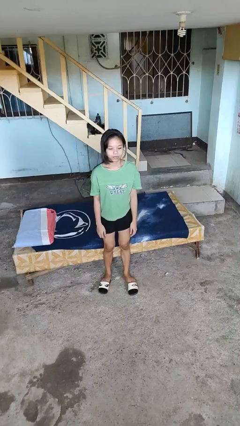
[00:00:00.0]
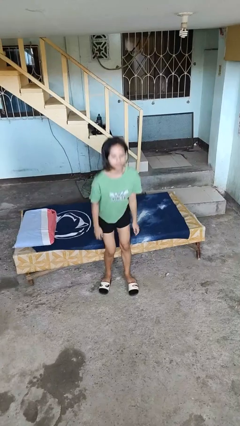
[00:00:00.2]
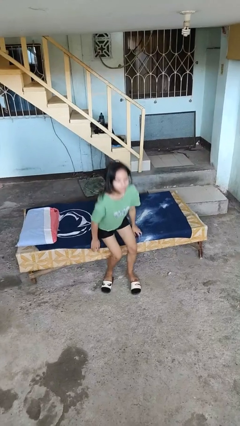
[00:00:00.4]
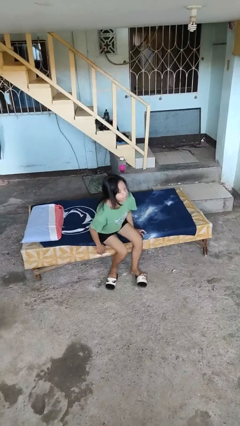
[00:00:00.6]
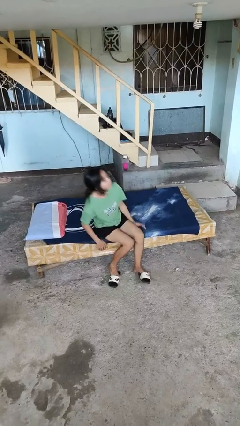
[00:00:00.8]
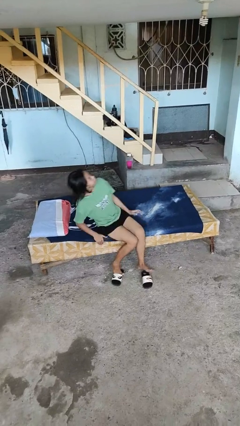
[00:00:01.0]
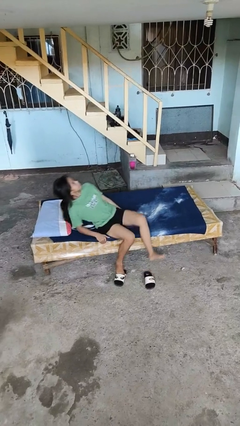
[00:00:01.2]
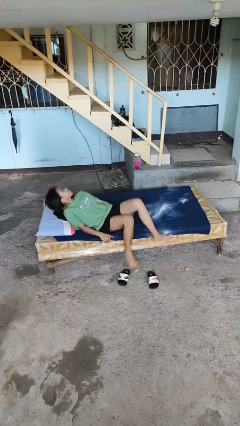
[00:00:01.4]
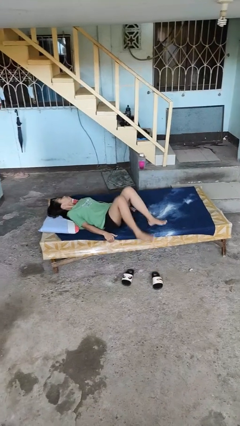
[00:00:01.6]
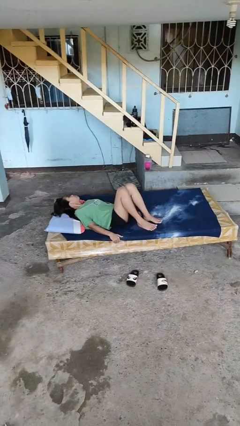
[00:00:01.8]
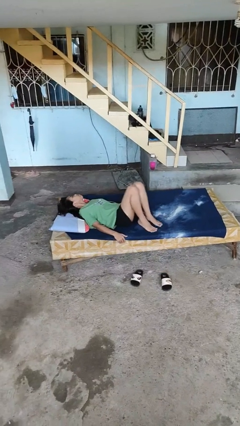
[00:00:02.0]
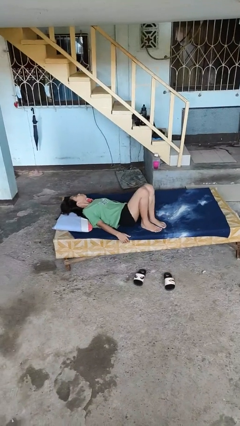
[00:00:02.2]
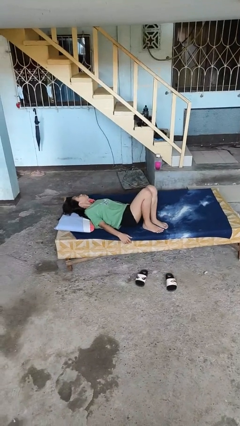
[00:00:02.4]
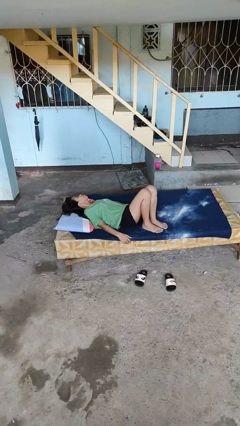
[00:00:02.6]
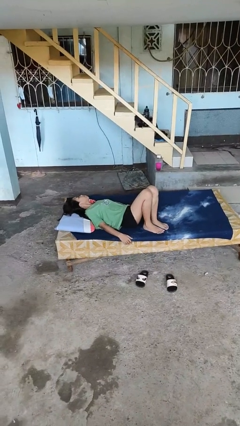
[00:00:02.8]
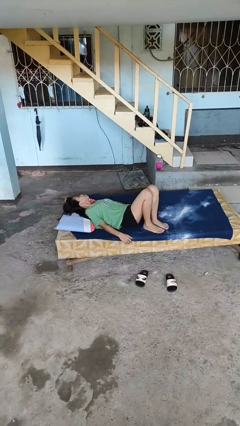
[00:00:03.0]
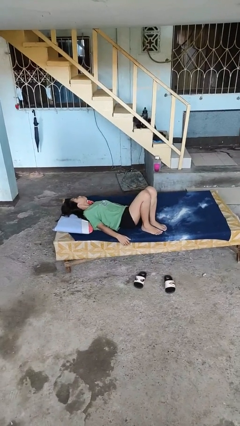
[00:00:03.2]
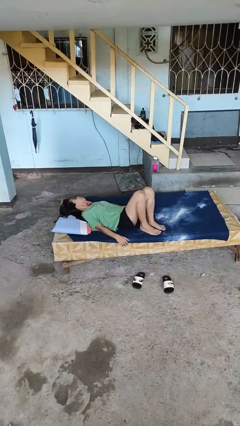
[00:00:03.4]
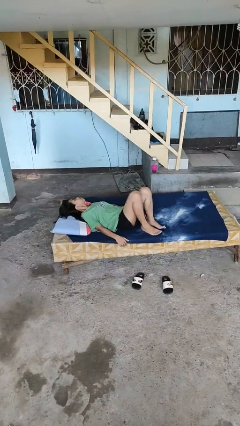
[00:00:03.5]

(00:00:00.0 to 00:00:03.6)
person lies down on bed

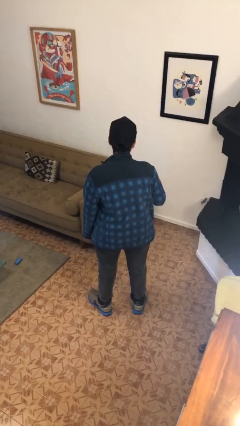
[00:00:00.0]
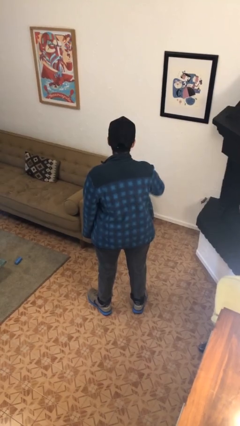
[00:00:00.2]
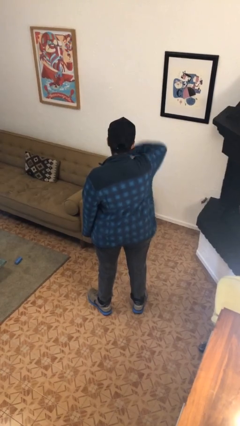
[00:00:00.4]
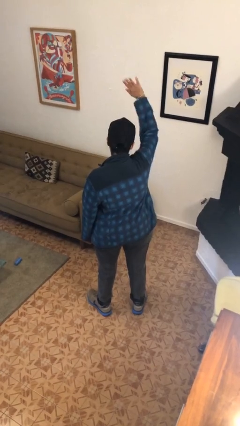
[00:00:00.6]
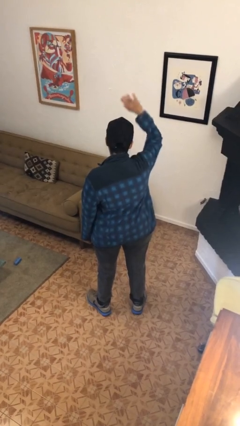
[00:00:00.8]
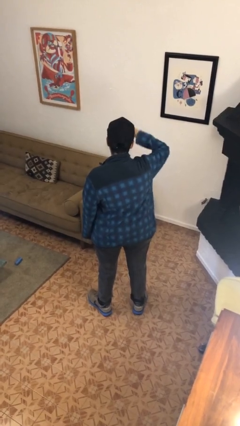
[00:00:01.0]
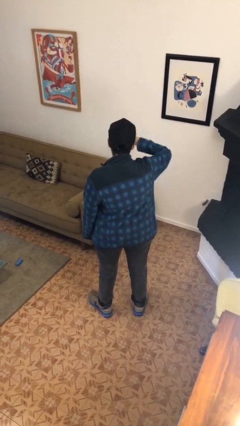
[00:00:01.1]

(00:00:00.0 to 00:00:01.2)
person gestures swipe up

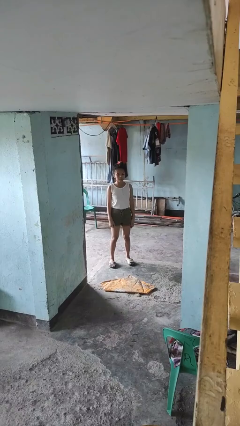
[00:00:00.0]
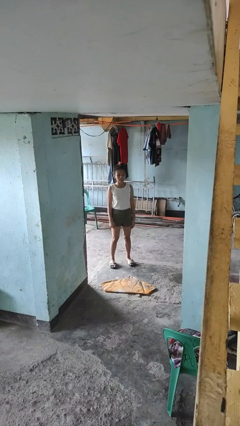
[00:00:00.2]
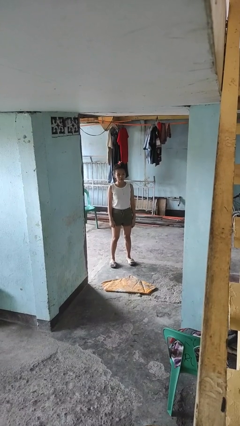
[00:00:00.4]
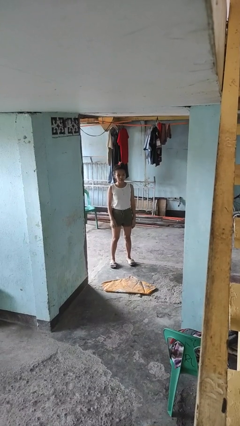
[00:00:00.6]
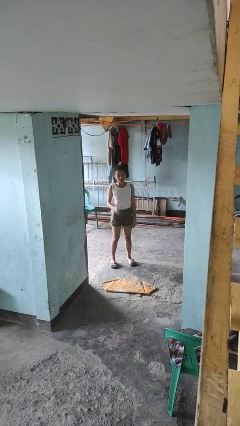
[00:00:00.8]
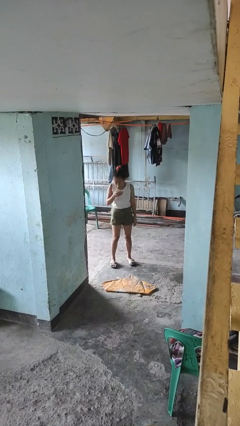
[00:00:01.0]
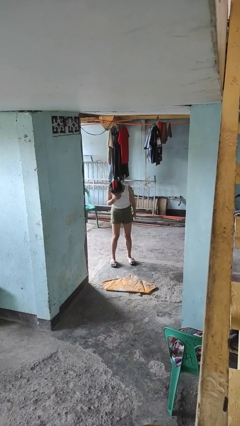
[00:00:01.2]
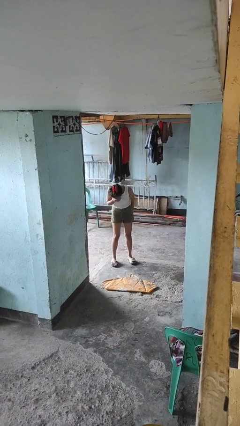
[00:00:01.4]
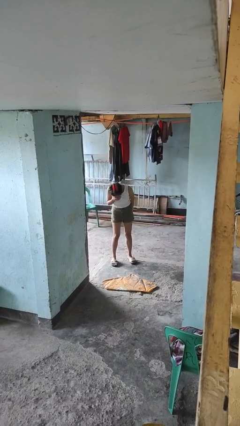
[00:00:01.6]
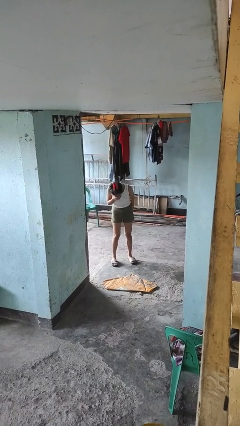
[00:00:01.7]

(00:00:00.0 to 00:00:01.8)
person sneezes into hand

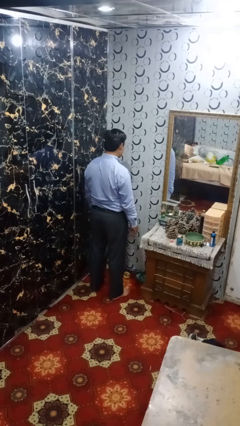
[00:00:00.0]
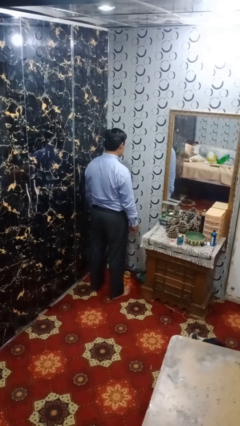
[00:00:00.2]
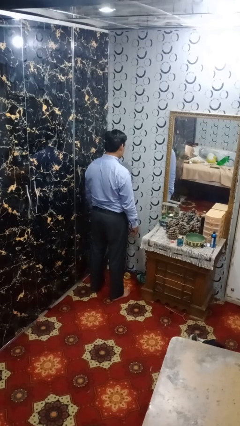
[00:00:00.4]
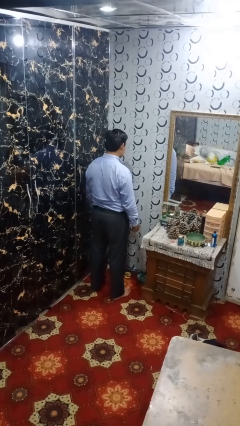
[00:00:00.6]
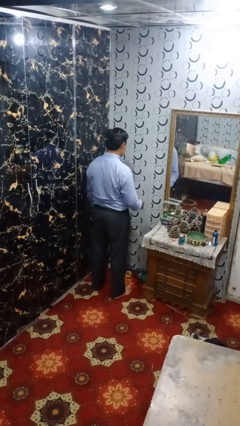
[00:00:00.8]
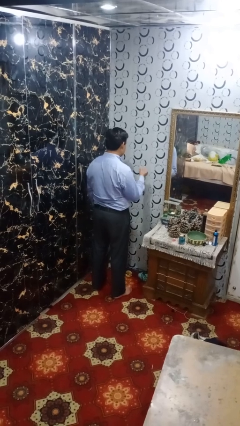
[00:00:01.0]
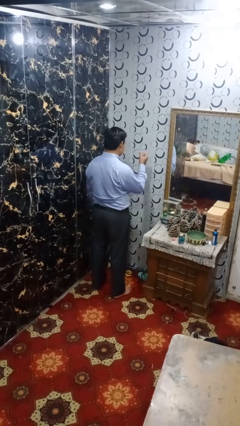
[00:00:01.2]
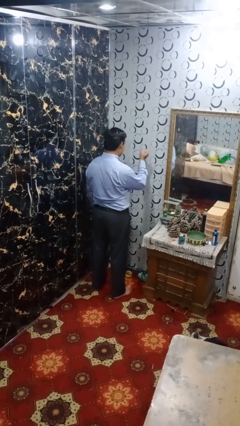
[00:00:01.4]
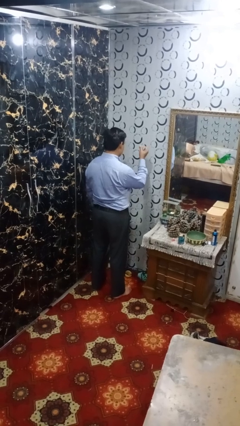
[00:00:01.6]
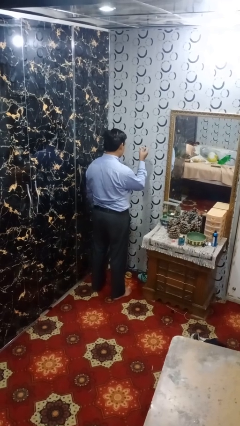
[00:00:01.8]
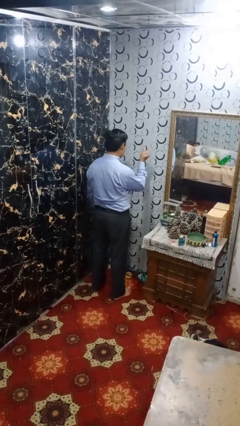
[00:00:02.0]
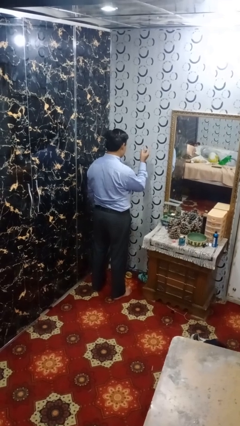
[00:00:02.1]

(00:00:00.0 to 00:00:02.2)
person snaps fingers

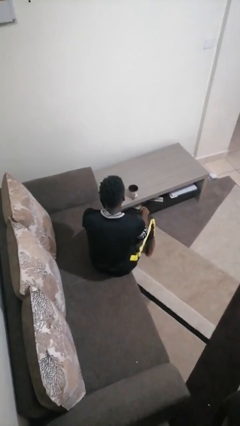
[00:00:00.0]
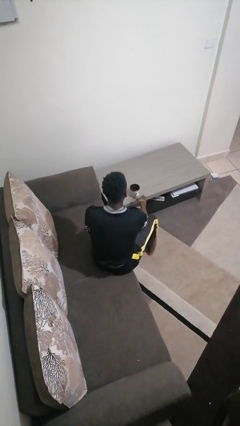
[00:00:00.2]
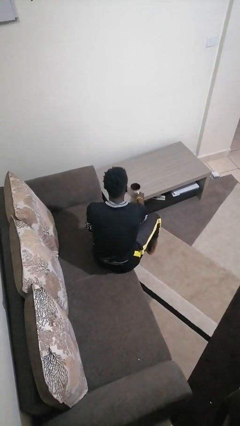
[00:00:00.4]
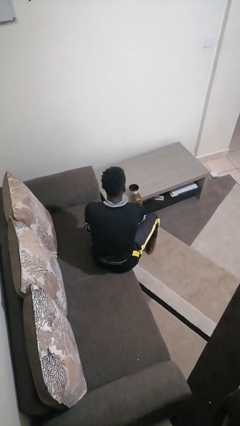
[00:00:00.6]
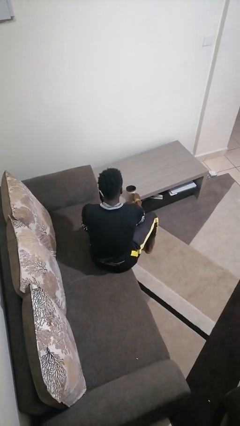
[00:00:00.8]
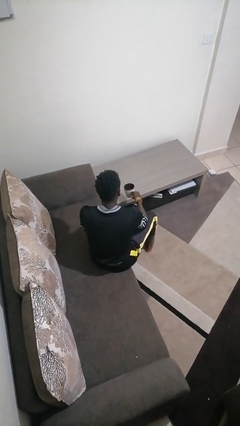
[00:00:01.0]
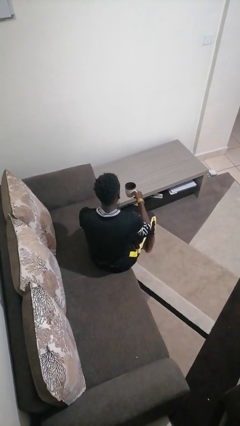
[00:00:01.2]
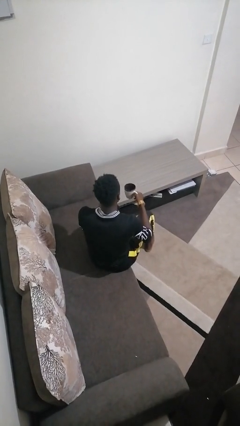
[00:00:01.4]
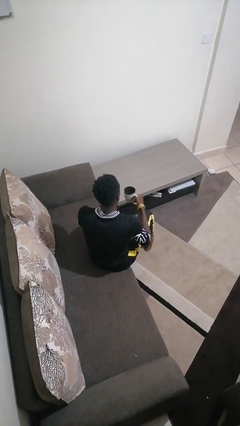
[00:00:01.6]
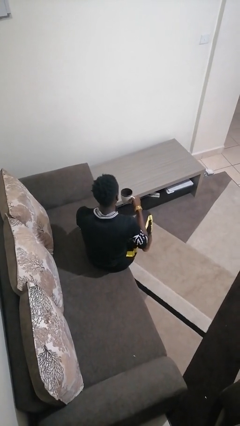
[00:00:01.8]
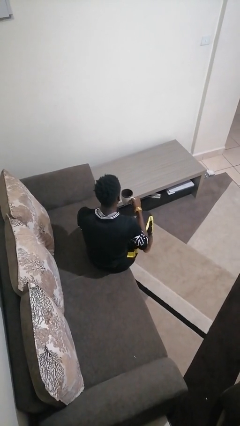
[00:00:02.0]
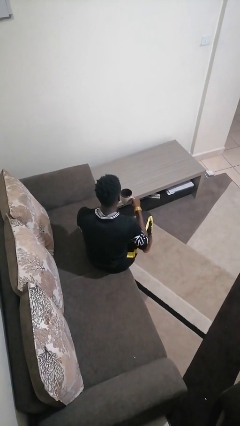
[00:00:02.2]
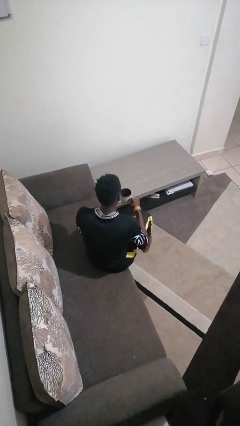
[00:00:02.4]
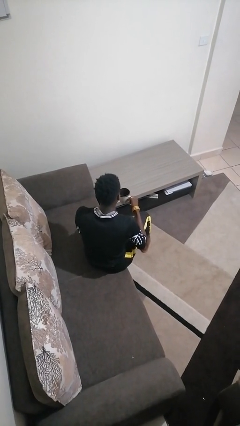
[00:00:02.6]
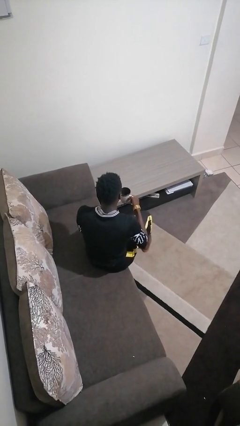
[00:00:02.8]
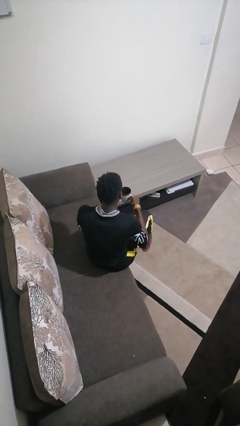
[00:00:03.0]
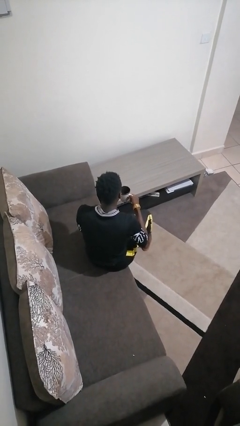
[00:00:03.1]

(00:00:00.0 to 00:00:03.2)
person picks up object from table

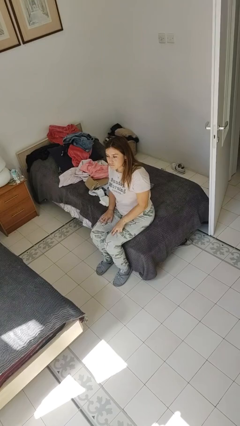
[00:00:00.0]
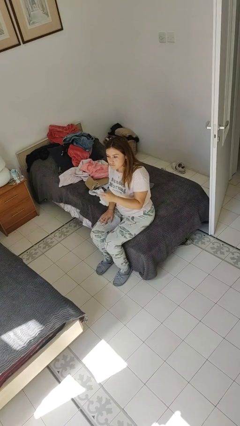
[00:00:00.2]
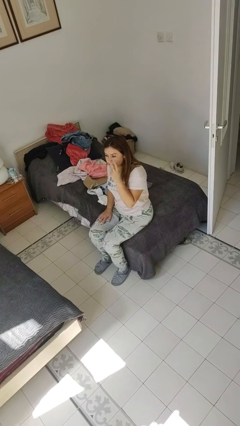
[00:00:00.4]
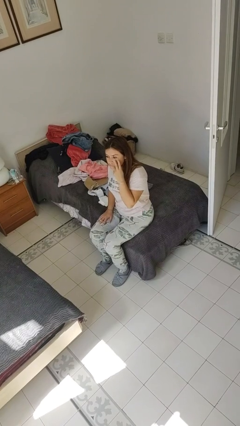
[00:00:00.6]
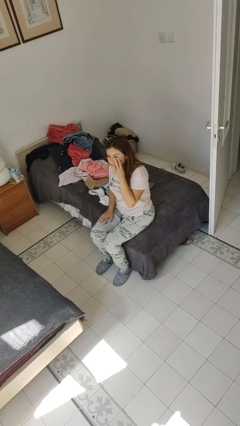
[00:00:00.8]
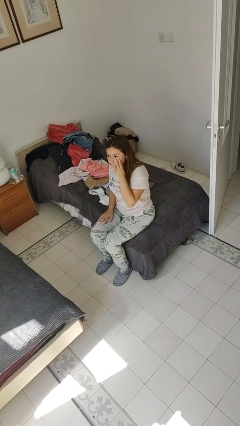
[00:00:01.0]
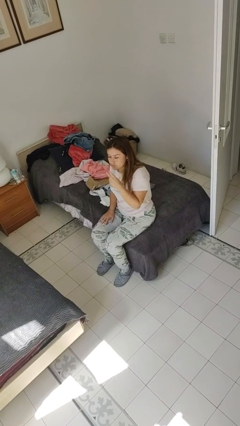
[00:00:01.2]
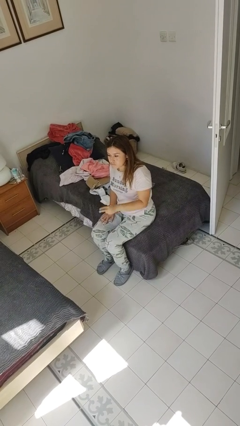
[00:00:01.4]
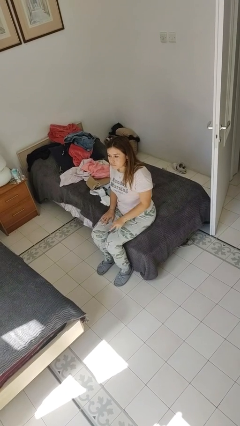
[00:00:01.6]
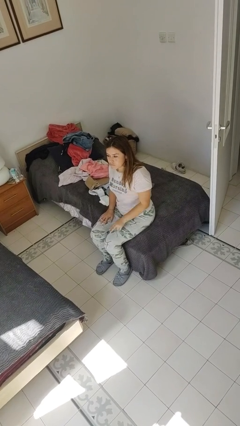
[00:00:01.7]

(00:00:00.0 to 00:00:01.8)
person gestures watch closely

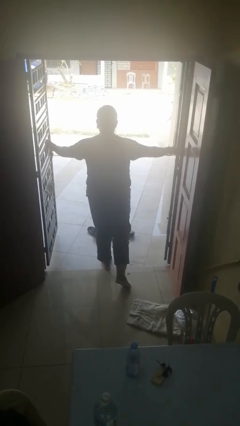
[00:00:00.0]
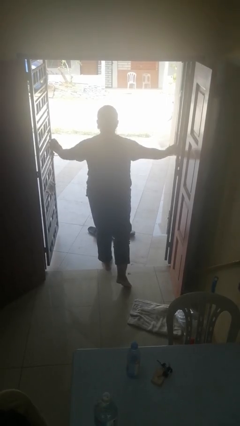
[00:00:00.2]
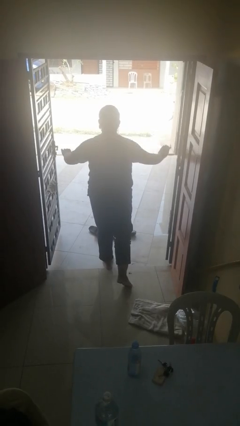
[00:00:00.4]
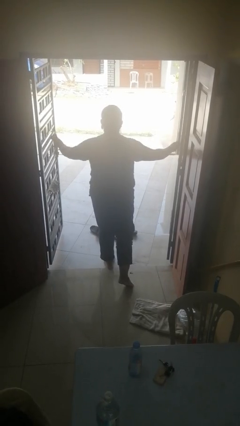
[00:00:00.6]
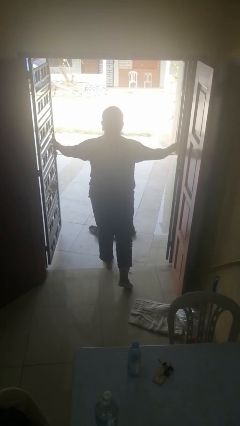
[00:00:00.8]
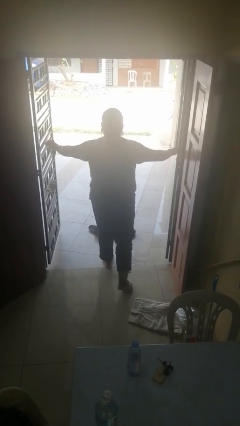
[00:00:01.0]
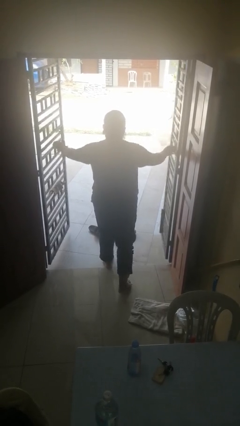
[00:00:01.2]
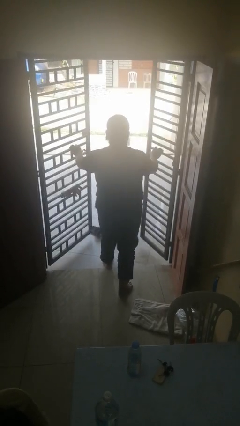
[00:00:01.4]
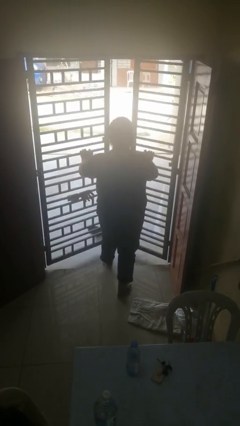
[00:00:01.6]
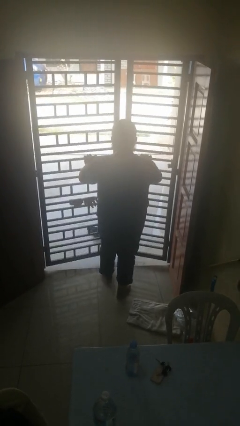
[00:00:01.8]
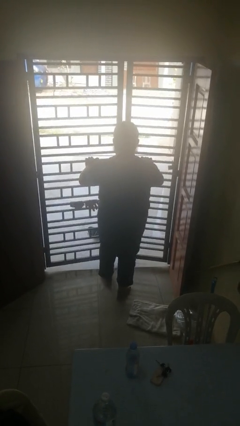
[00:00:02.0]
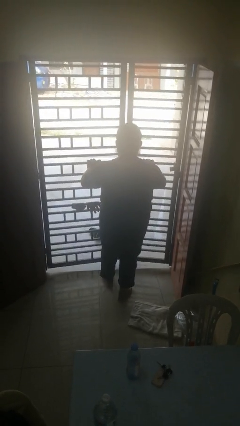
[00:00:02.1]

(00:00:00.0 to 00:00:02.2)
person closes gate

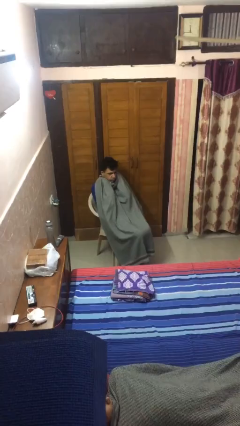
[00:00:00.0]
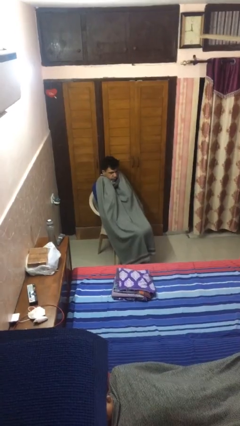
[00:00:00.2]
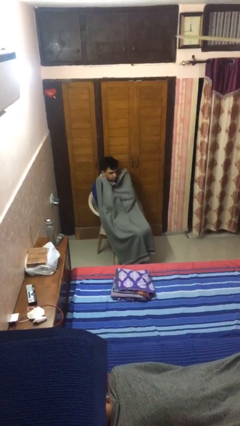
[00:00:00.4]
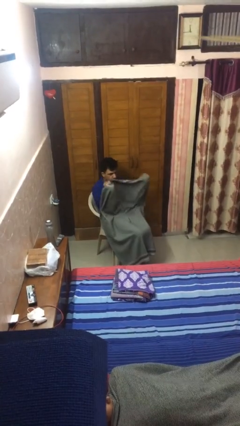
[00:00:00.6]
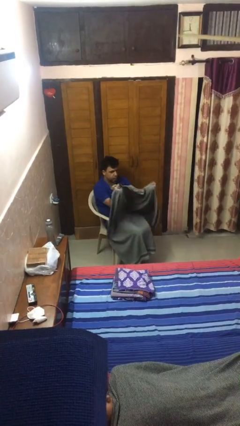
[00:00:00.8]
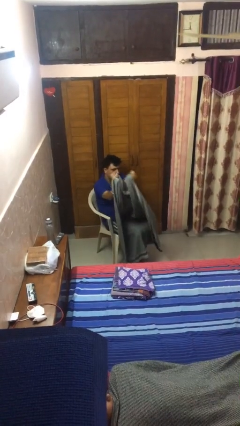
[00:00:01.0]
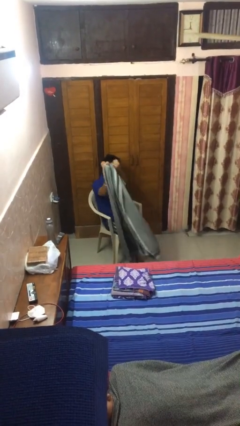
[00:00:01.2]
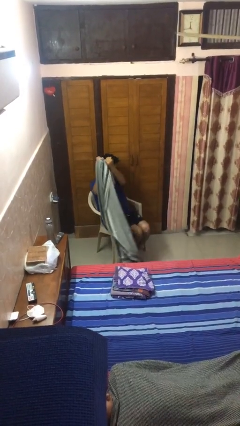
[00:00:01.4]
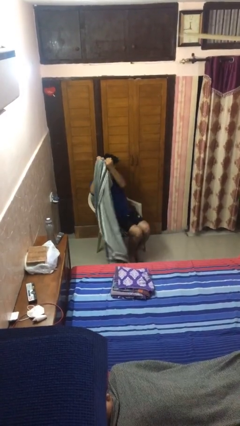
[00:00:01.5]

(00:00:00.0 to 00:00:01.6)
person uncovers with blanket
